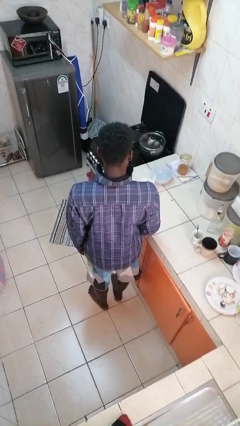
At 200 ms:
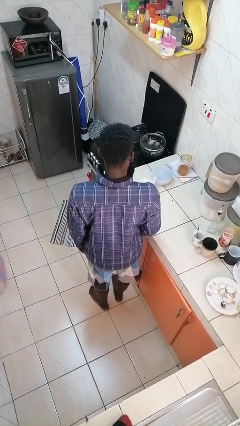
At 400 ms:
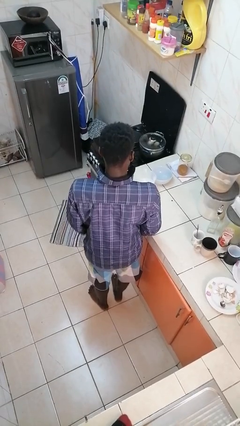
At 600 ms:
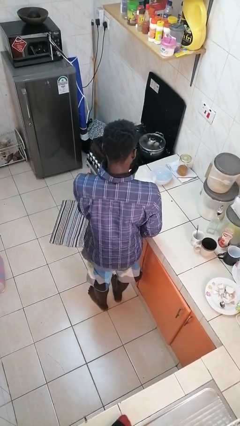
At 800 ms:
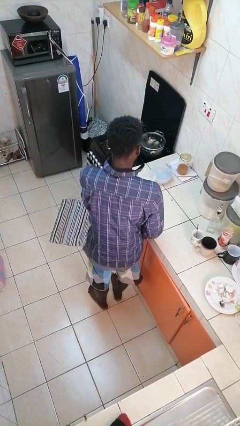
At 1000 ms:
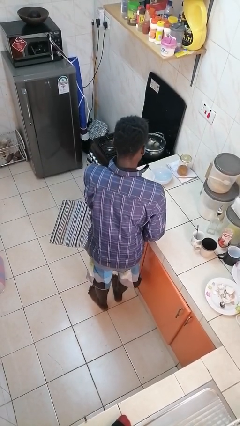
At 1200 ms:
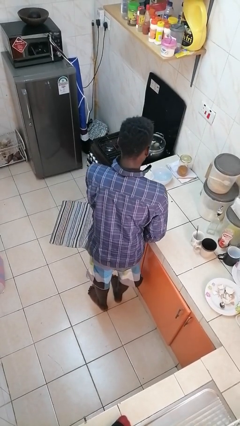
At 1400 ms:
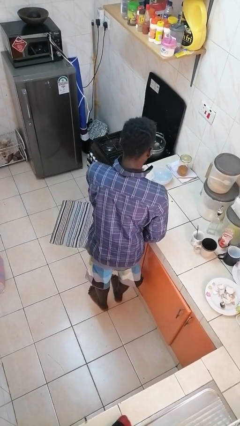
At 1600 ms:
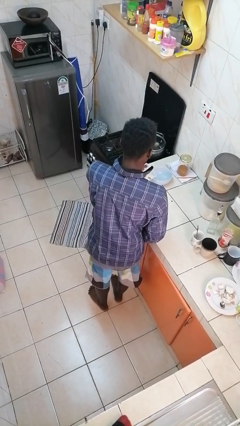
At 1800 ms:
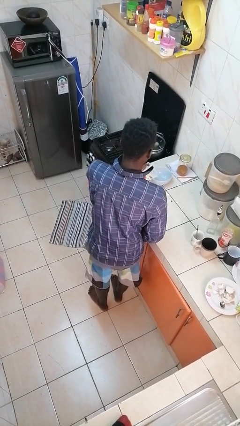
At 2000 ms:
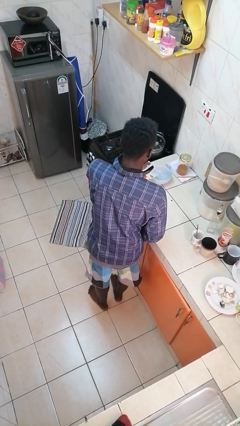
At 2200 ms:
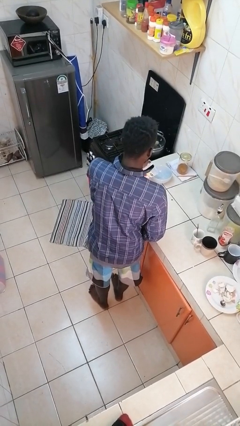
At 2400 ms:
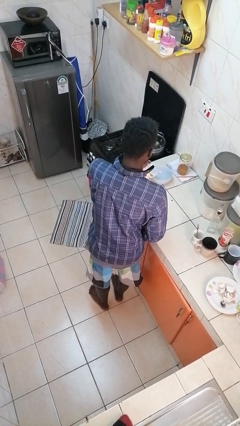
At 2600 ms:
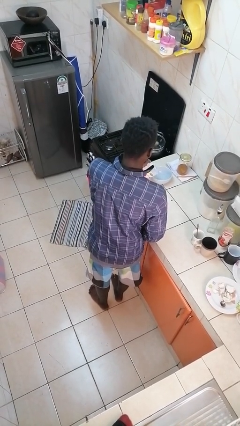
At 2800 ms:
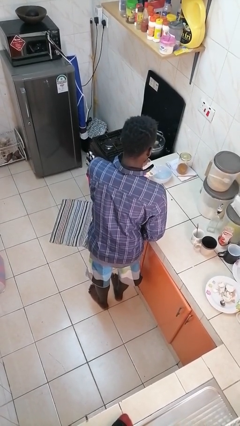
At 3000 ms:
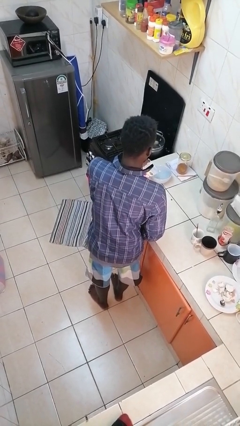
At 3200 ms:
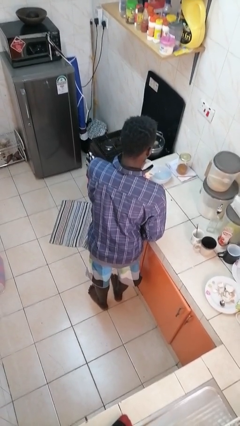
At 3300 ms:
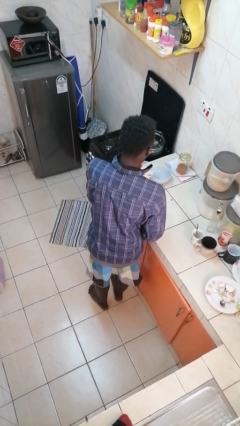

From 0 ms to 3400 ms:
person pours into bowl

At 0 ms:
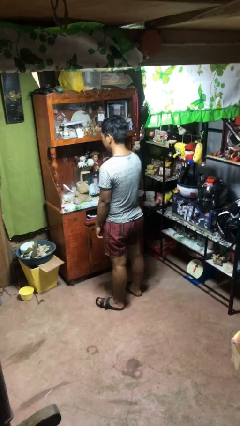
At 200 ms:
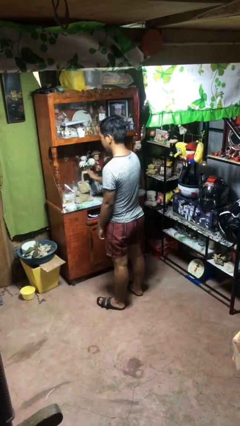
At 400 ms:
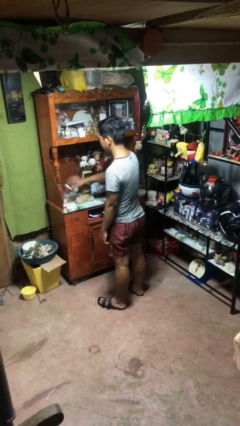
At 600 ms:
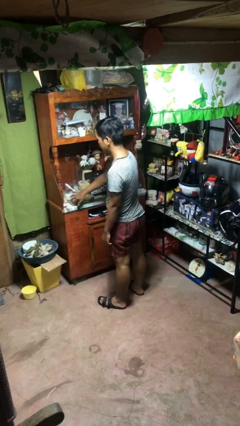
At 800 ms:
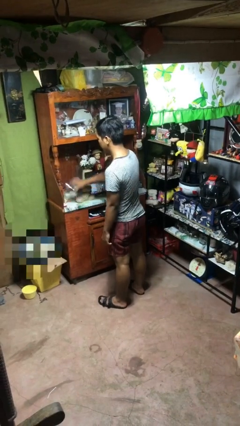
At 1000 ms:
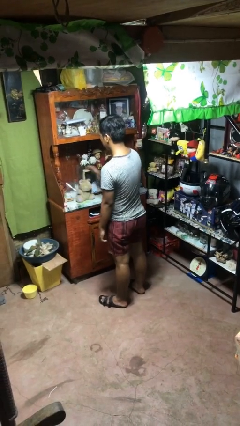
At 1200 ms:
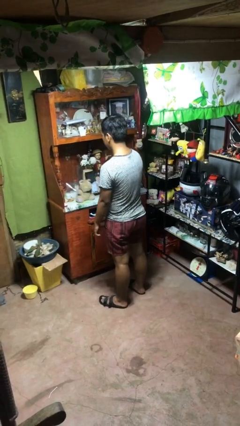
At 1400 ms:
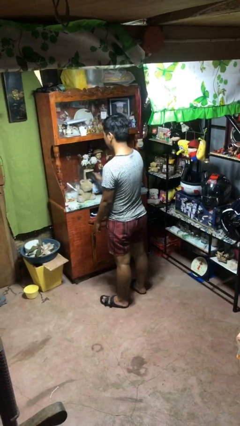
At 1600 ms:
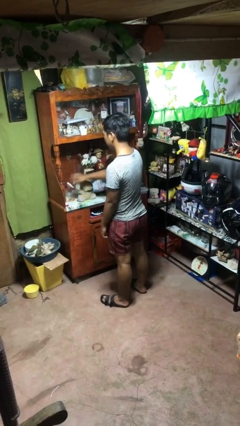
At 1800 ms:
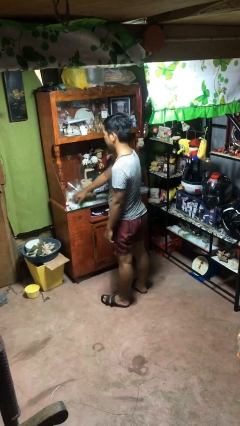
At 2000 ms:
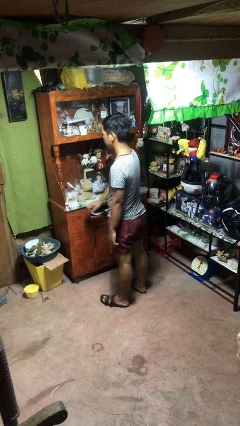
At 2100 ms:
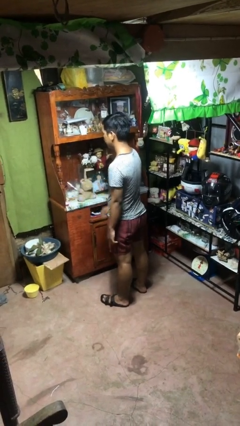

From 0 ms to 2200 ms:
person waves hand over object

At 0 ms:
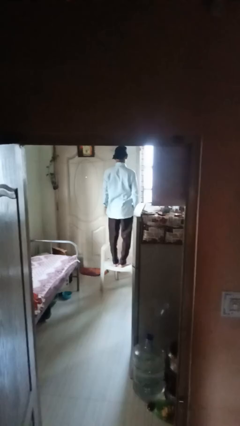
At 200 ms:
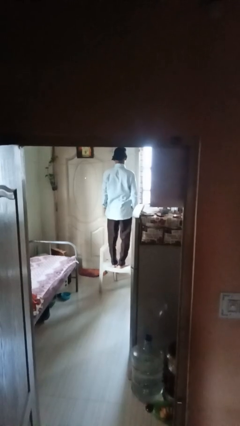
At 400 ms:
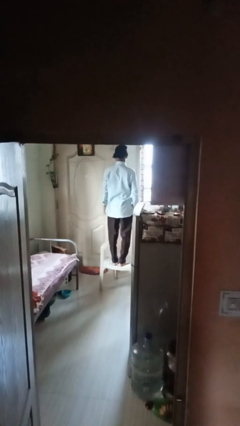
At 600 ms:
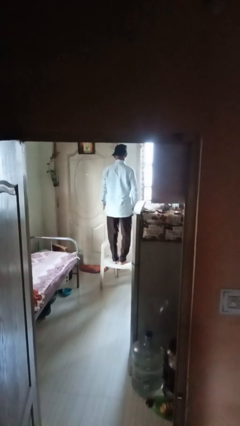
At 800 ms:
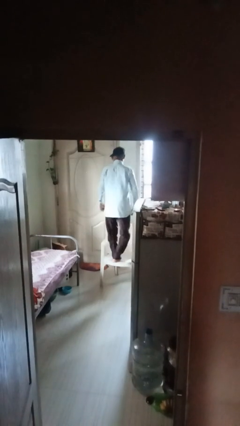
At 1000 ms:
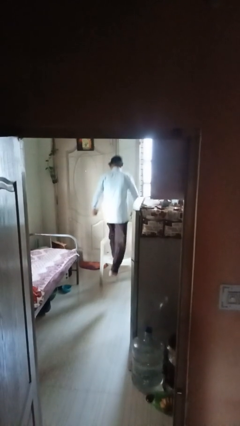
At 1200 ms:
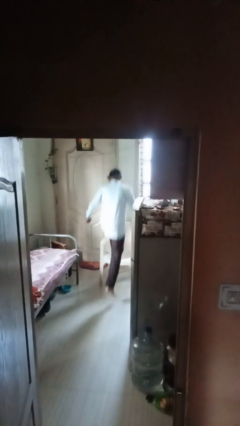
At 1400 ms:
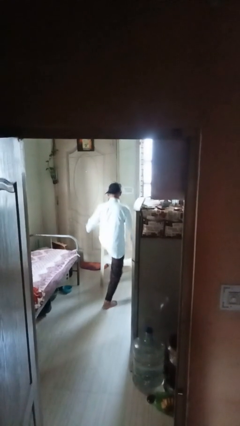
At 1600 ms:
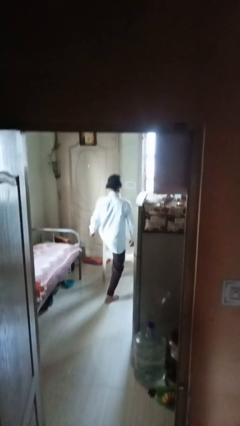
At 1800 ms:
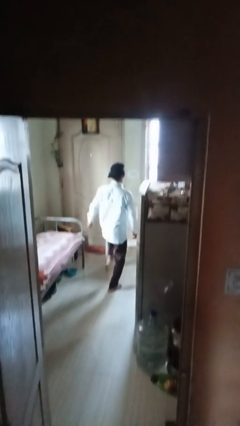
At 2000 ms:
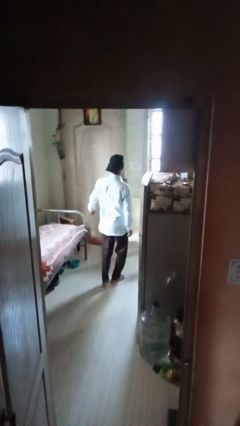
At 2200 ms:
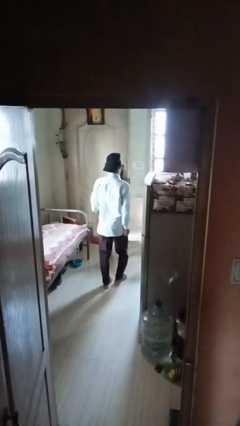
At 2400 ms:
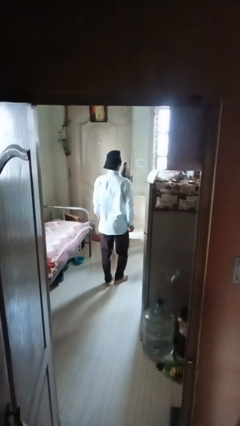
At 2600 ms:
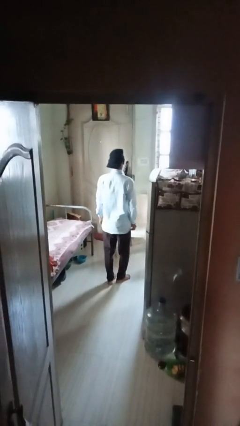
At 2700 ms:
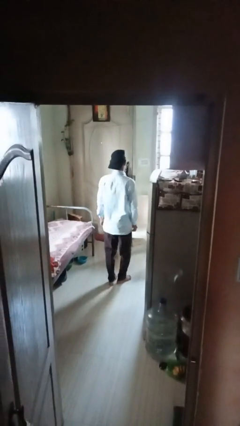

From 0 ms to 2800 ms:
person climbs off chair

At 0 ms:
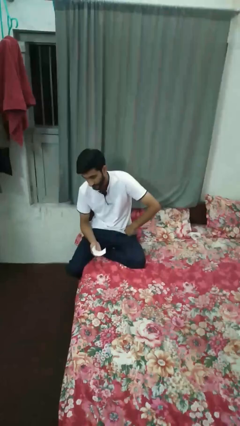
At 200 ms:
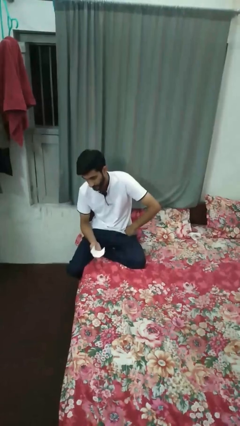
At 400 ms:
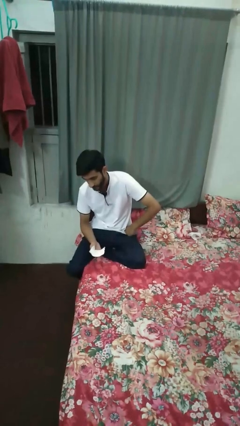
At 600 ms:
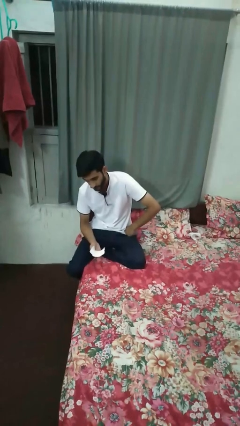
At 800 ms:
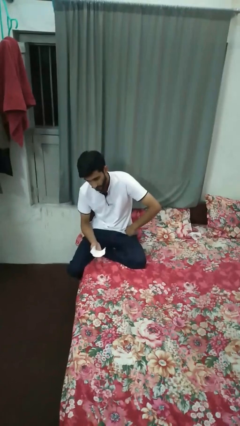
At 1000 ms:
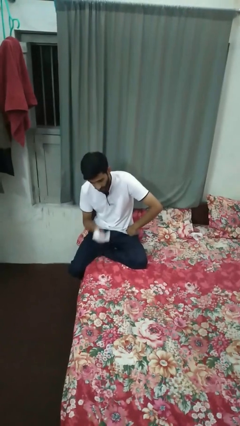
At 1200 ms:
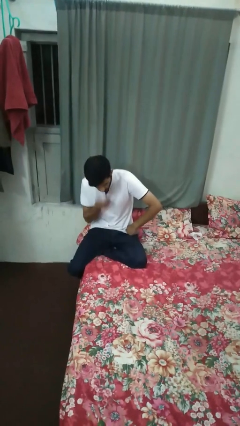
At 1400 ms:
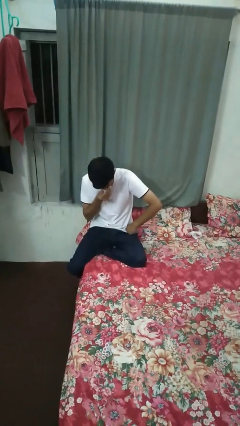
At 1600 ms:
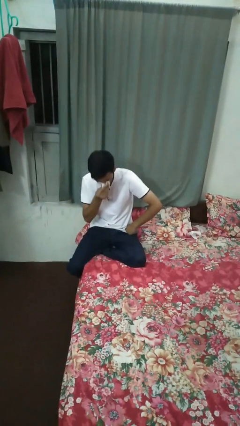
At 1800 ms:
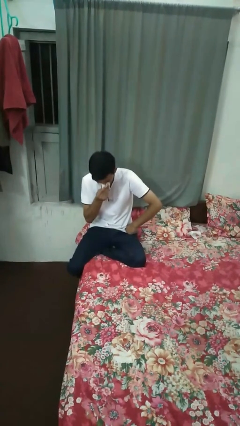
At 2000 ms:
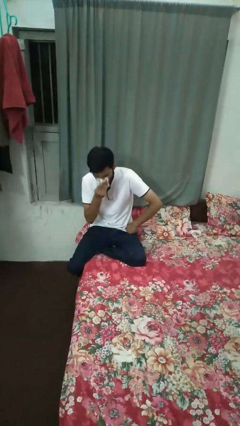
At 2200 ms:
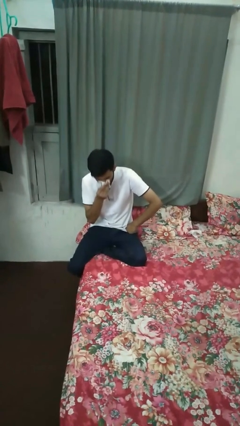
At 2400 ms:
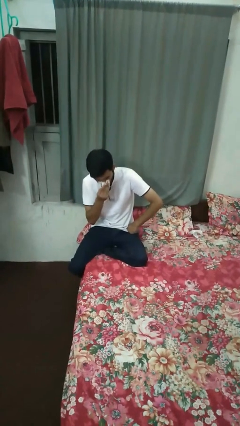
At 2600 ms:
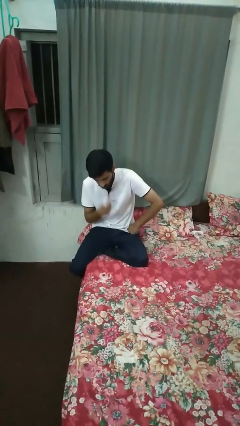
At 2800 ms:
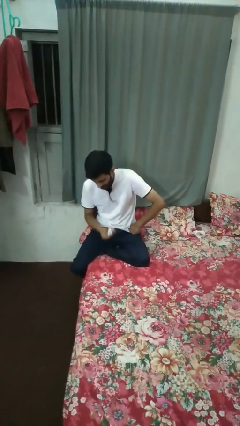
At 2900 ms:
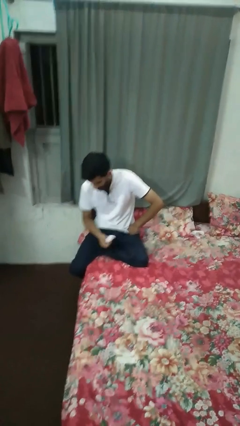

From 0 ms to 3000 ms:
person blows nose

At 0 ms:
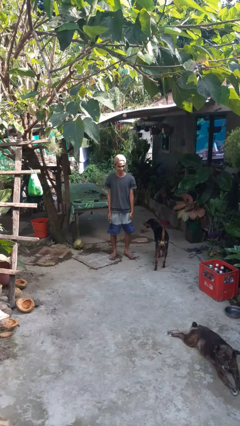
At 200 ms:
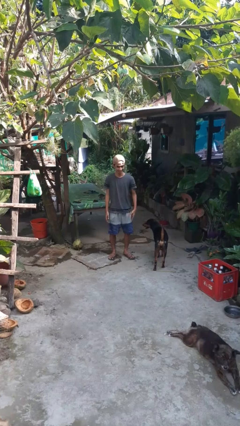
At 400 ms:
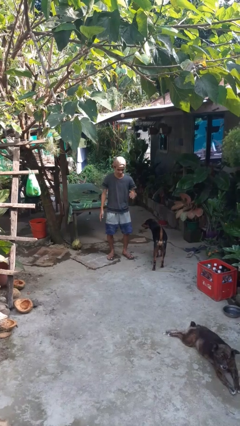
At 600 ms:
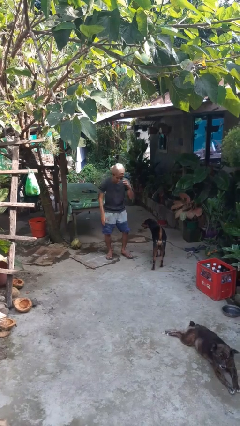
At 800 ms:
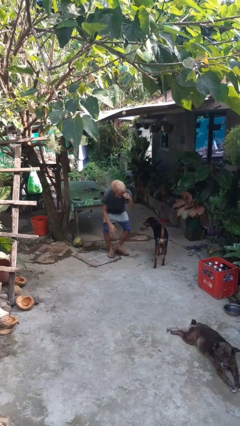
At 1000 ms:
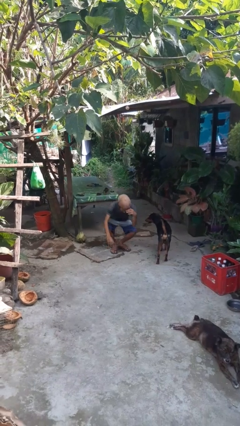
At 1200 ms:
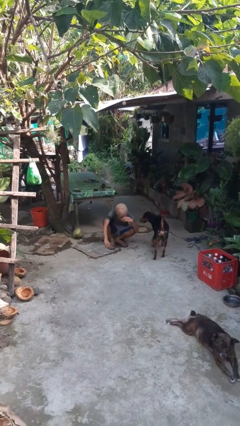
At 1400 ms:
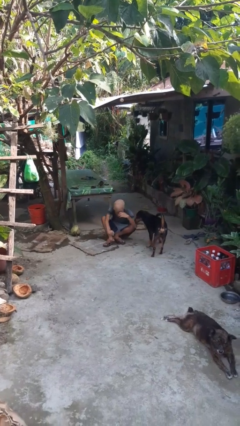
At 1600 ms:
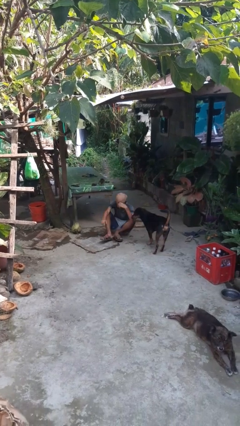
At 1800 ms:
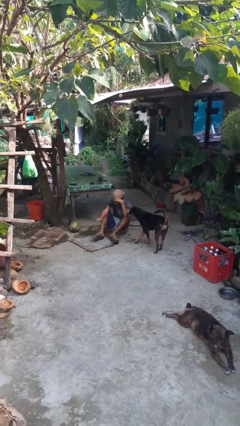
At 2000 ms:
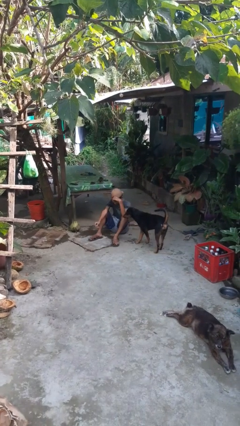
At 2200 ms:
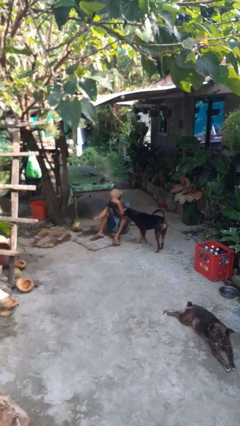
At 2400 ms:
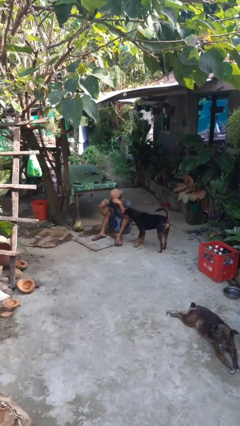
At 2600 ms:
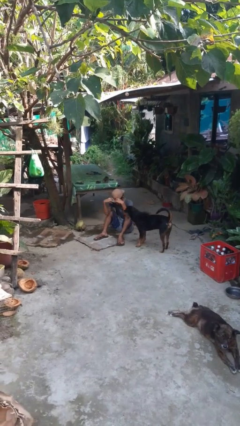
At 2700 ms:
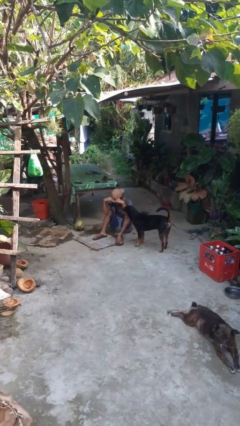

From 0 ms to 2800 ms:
person falls while standing

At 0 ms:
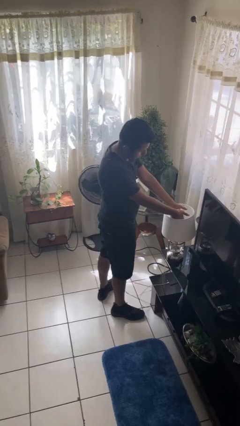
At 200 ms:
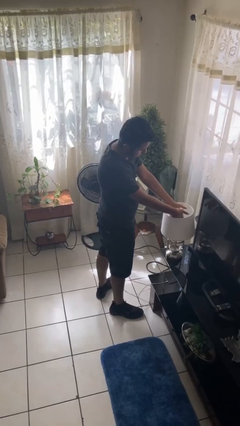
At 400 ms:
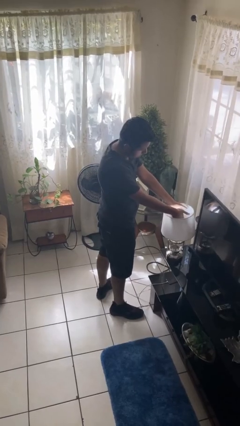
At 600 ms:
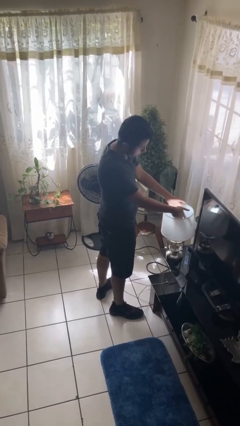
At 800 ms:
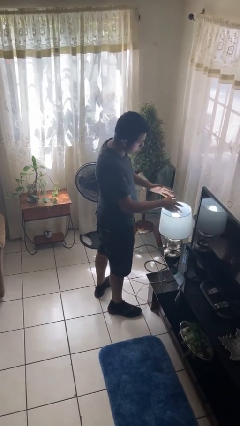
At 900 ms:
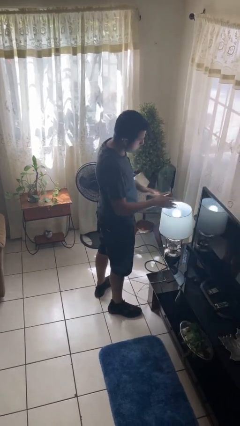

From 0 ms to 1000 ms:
person turns on lamp

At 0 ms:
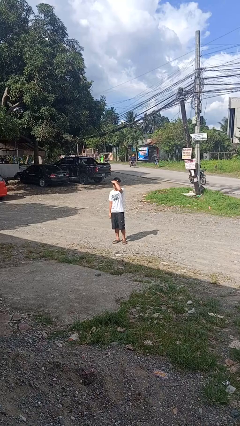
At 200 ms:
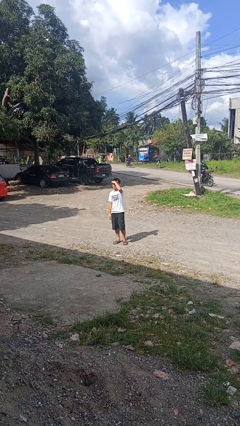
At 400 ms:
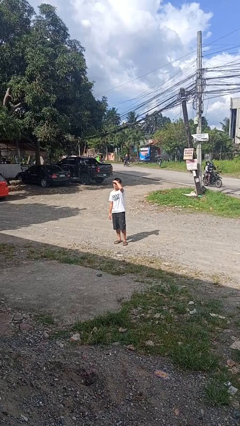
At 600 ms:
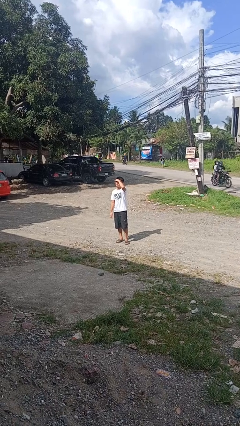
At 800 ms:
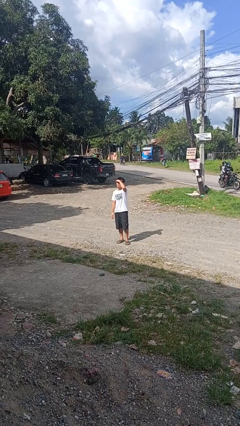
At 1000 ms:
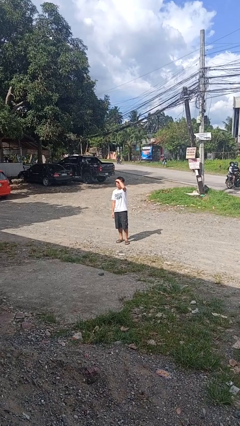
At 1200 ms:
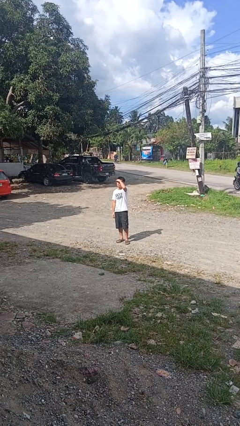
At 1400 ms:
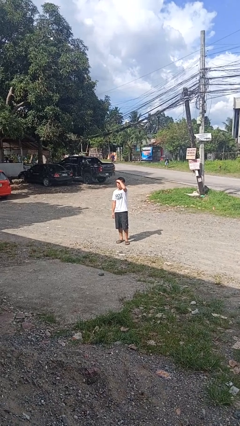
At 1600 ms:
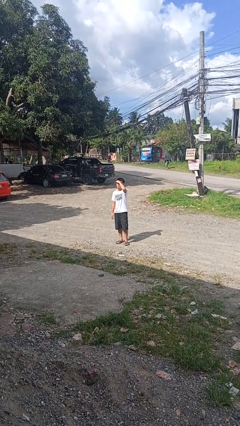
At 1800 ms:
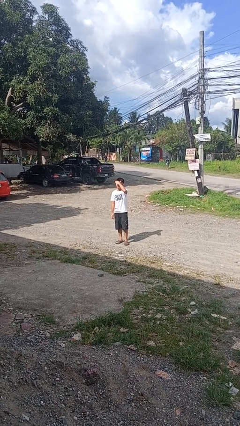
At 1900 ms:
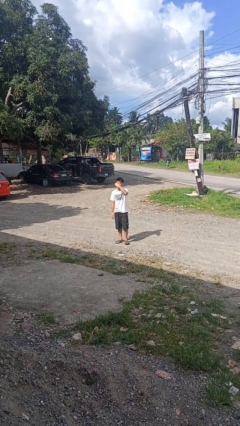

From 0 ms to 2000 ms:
person shades eyes
